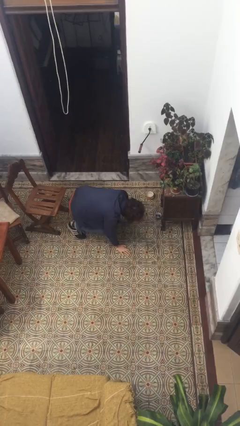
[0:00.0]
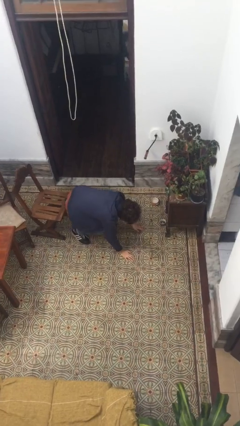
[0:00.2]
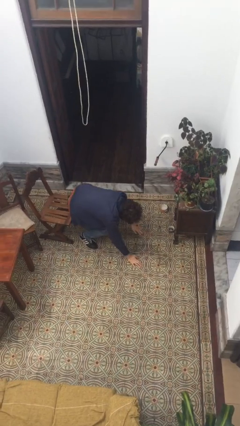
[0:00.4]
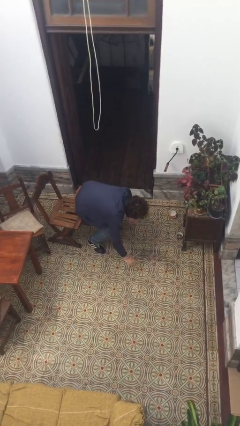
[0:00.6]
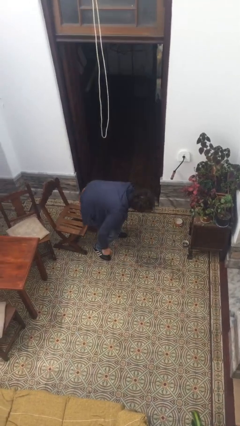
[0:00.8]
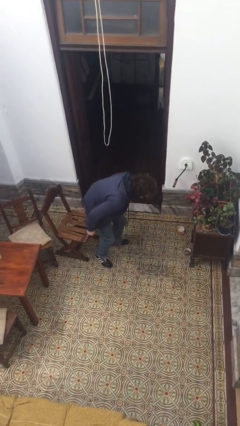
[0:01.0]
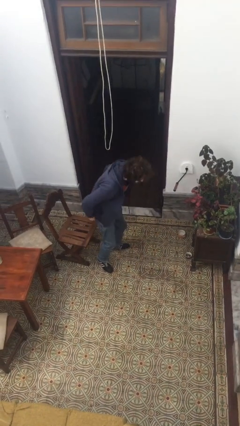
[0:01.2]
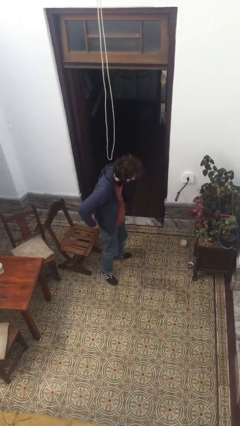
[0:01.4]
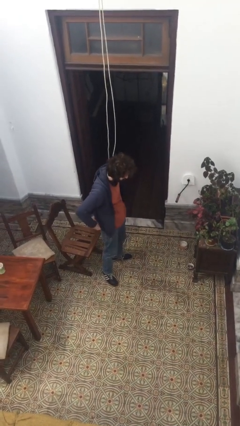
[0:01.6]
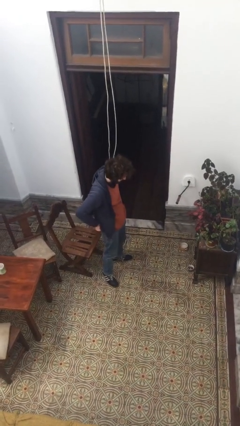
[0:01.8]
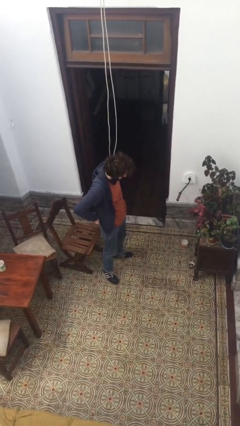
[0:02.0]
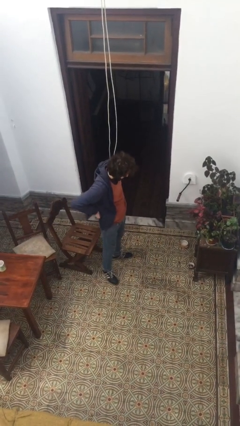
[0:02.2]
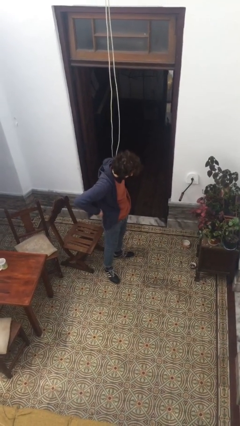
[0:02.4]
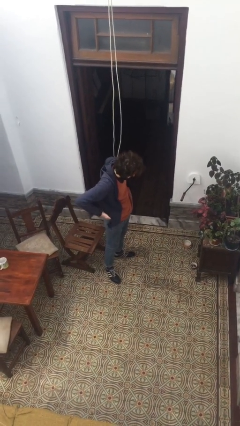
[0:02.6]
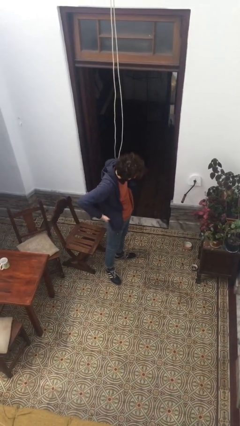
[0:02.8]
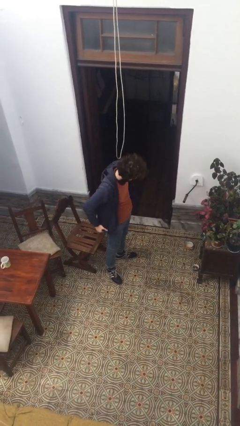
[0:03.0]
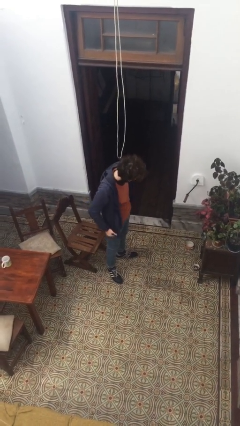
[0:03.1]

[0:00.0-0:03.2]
person stands up from floor

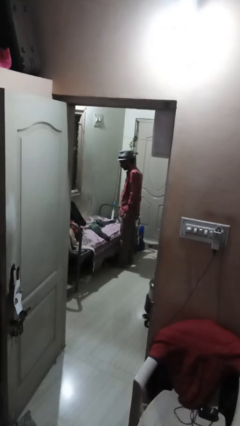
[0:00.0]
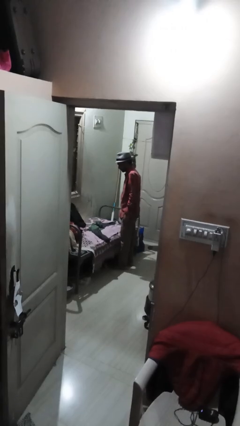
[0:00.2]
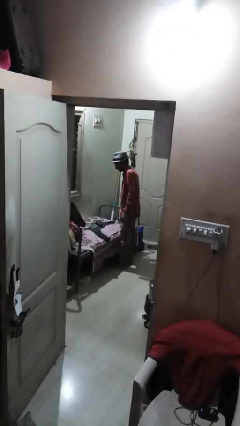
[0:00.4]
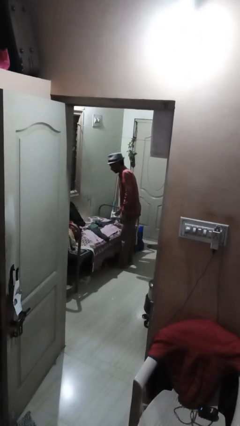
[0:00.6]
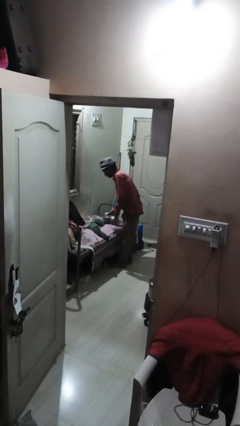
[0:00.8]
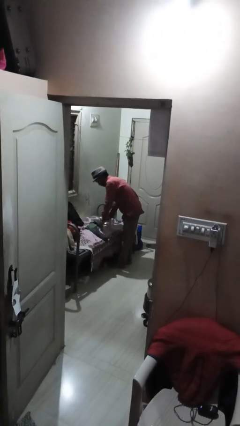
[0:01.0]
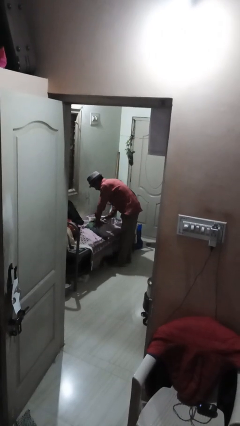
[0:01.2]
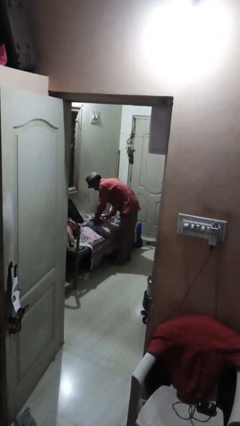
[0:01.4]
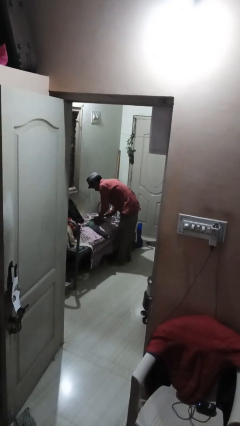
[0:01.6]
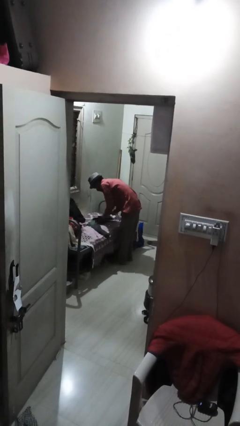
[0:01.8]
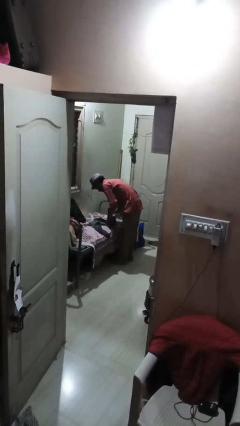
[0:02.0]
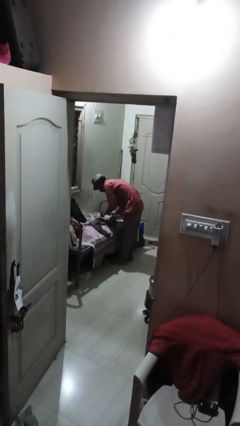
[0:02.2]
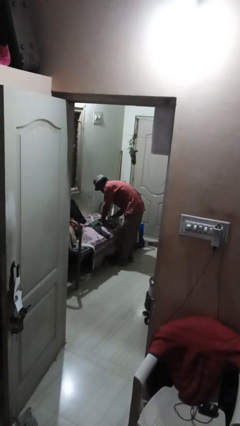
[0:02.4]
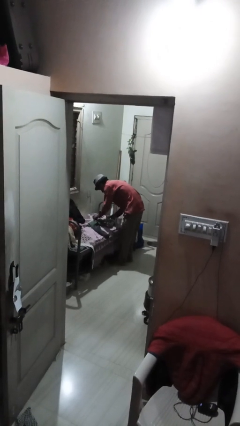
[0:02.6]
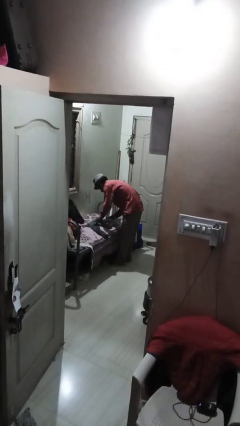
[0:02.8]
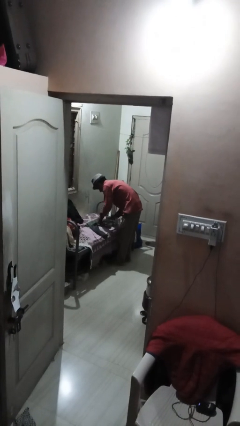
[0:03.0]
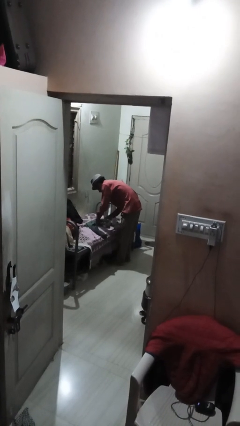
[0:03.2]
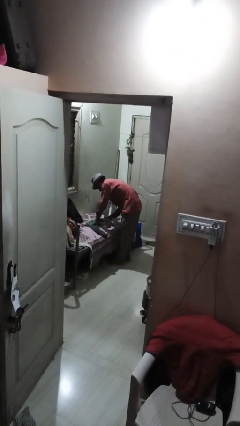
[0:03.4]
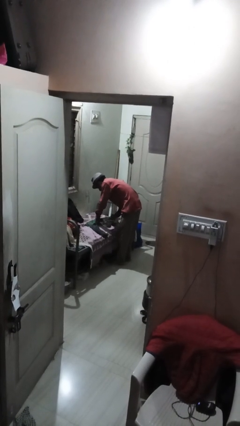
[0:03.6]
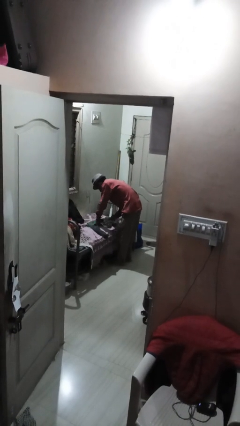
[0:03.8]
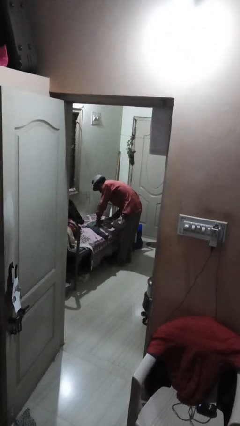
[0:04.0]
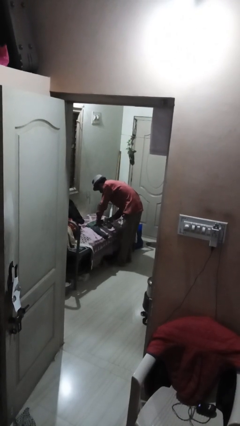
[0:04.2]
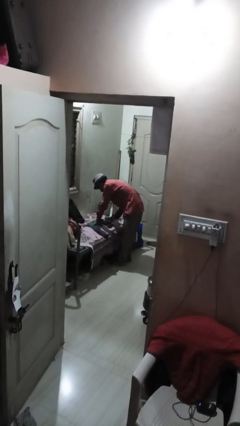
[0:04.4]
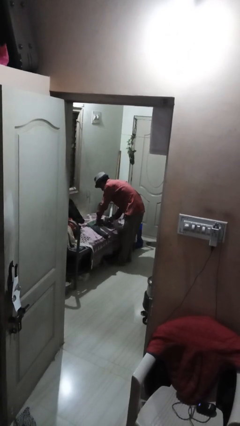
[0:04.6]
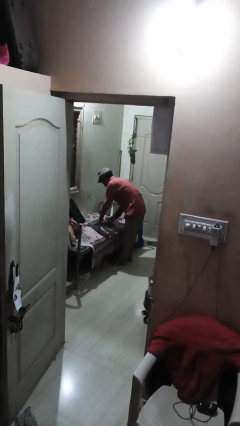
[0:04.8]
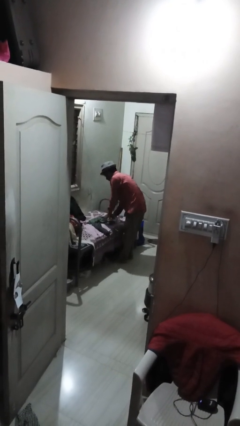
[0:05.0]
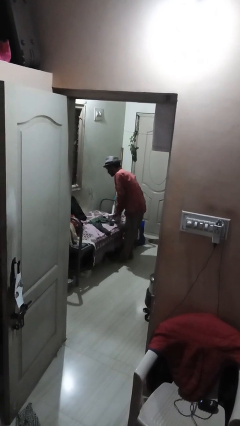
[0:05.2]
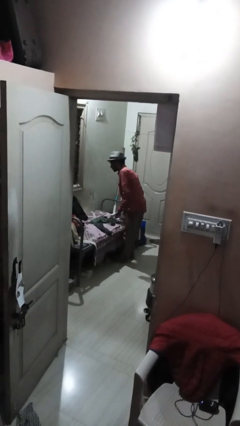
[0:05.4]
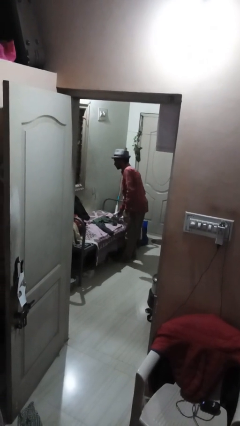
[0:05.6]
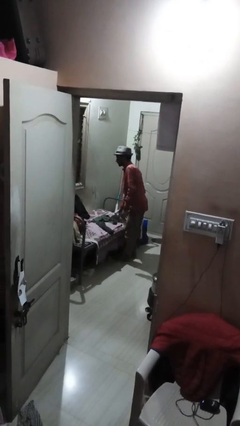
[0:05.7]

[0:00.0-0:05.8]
person irons clothes

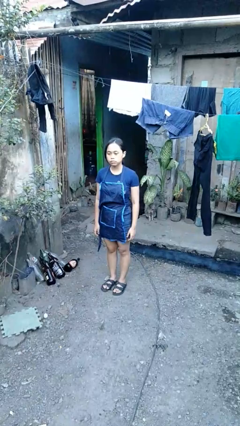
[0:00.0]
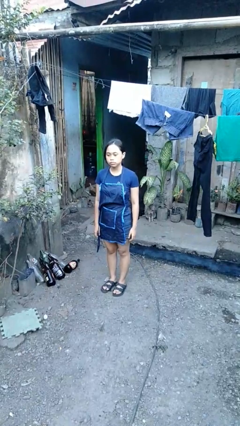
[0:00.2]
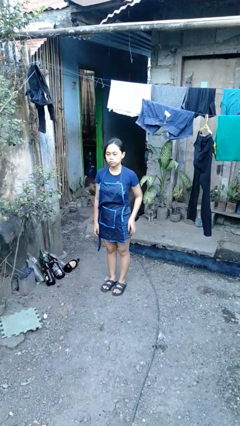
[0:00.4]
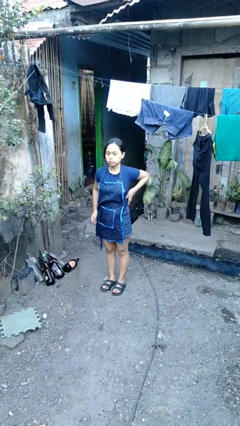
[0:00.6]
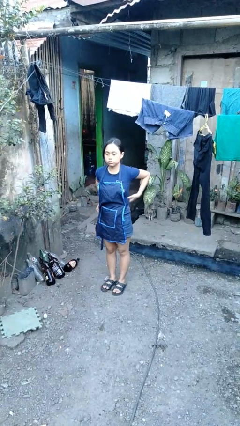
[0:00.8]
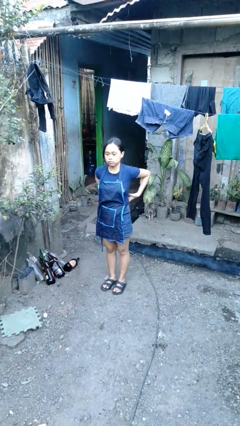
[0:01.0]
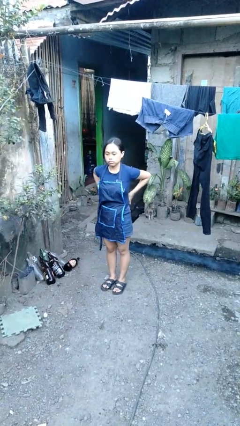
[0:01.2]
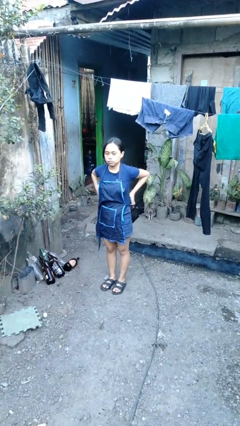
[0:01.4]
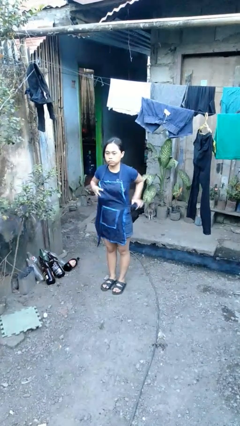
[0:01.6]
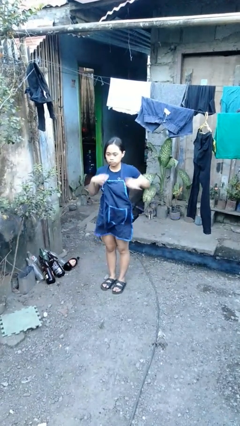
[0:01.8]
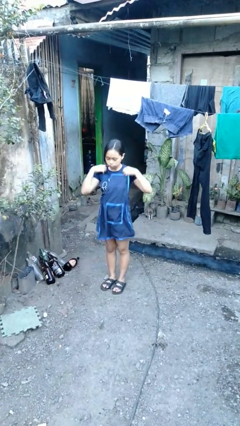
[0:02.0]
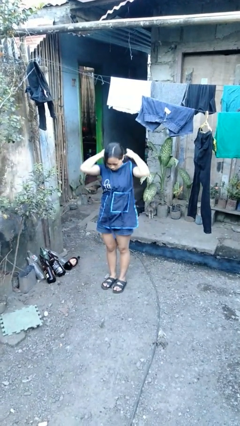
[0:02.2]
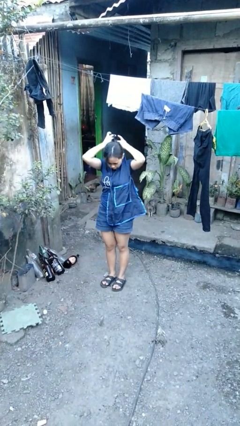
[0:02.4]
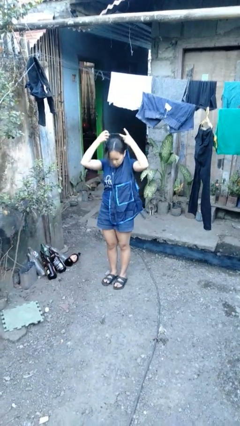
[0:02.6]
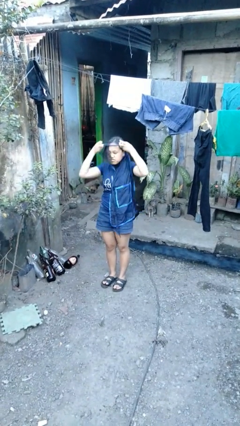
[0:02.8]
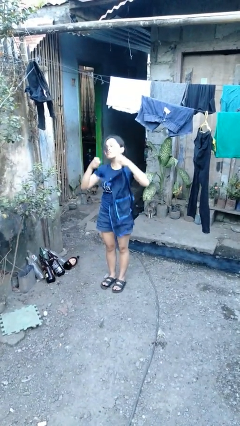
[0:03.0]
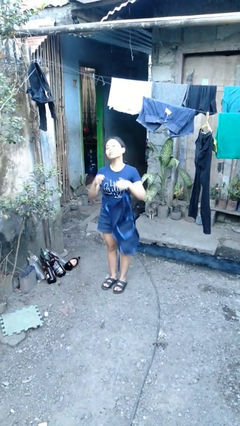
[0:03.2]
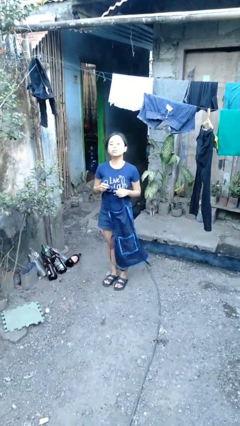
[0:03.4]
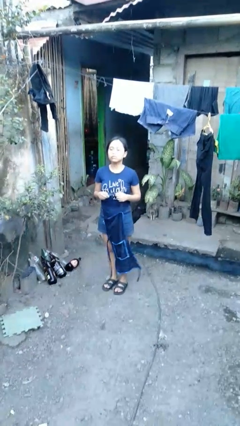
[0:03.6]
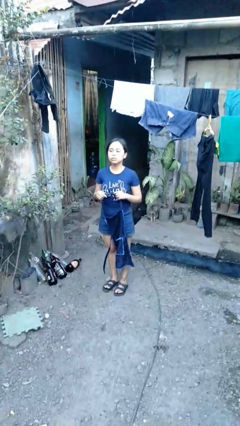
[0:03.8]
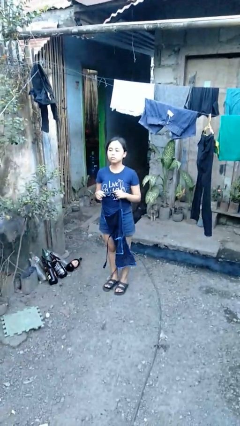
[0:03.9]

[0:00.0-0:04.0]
person takes off apron

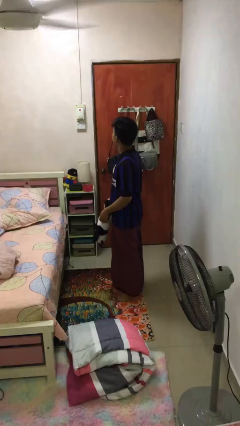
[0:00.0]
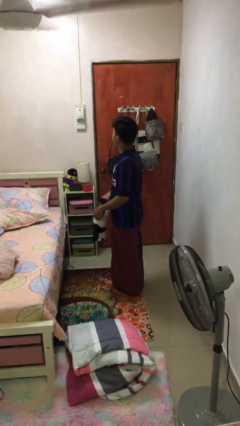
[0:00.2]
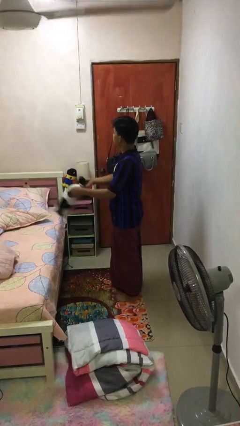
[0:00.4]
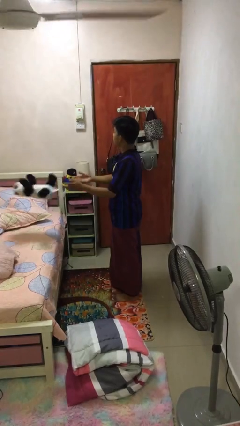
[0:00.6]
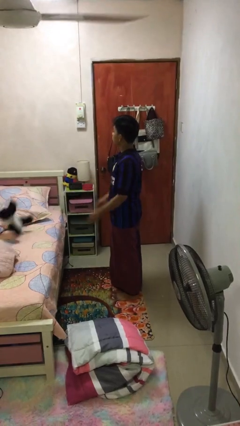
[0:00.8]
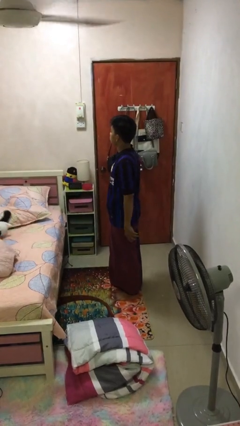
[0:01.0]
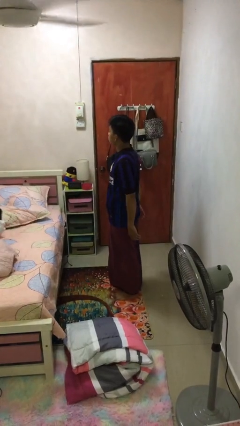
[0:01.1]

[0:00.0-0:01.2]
person throws object on bed

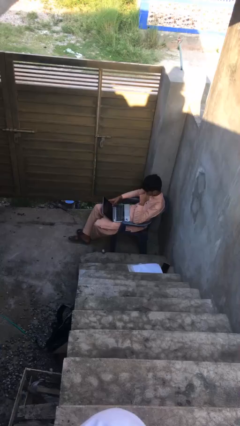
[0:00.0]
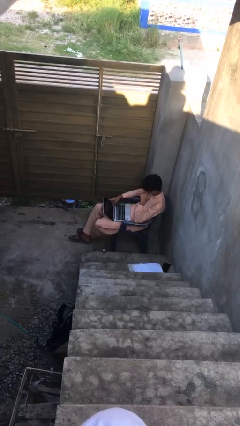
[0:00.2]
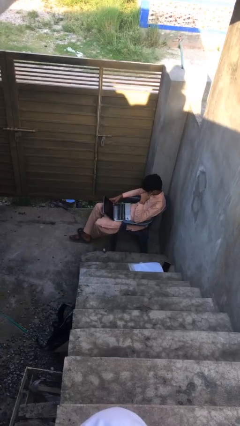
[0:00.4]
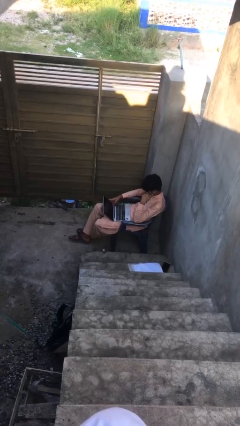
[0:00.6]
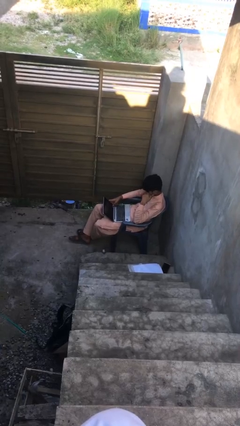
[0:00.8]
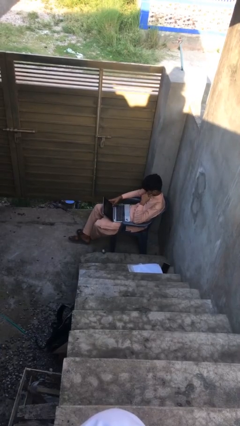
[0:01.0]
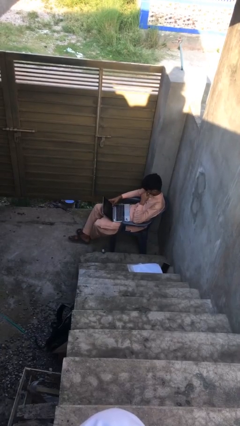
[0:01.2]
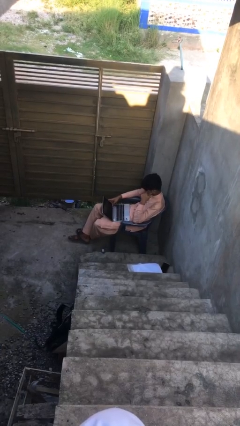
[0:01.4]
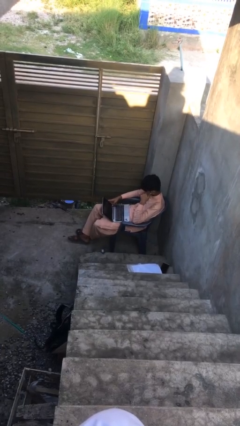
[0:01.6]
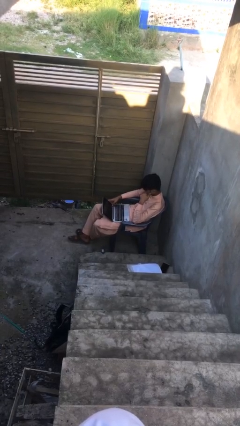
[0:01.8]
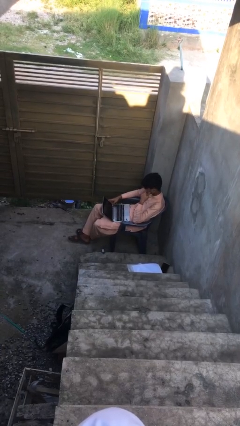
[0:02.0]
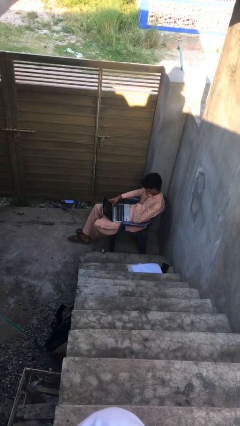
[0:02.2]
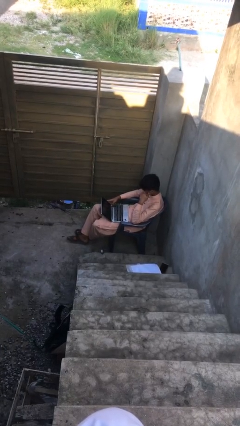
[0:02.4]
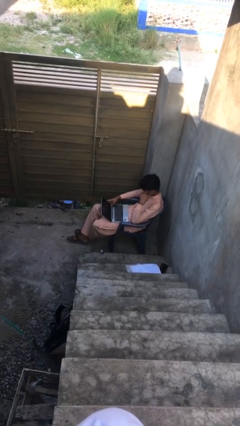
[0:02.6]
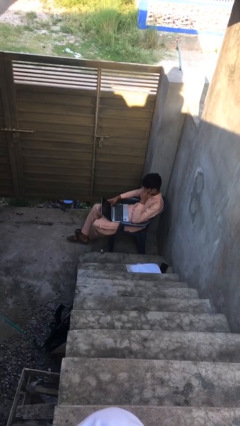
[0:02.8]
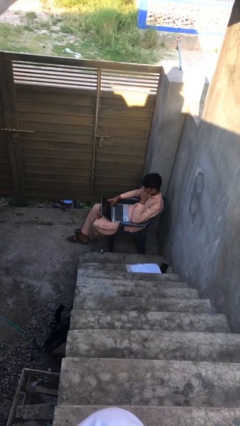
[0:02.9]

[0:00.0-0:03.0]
person interacts with laptop

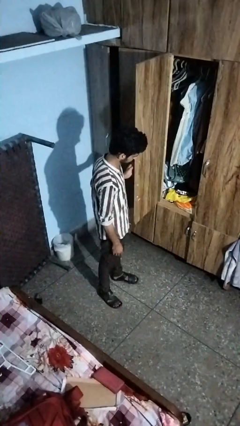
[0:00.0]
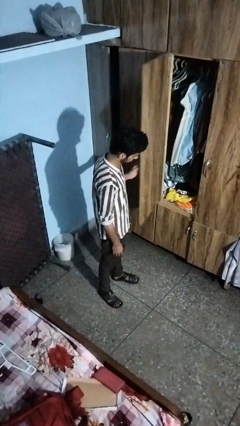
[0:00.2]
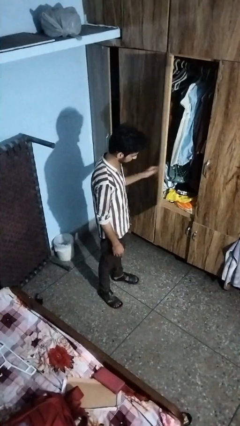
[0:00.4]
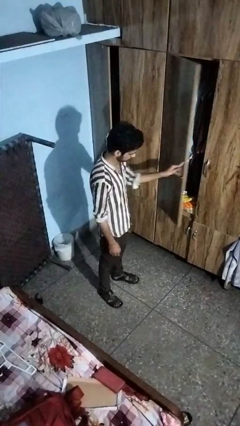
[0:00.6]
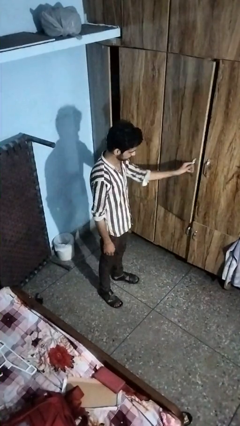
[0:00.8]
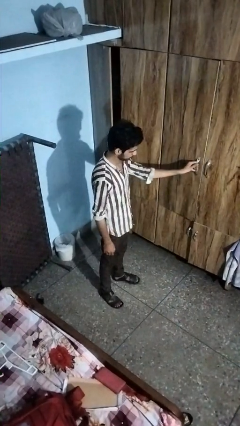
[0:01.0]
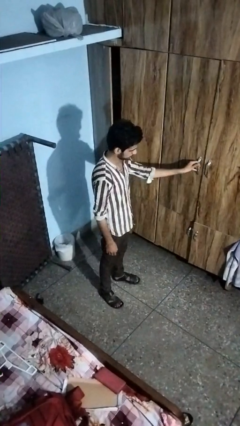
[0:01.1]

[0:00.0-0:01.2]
person closes closet door
